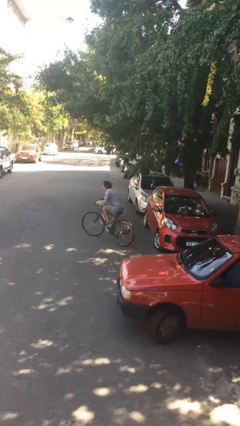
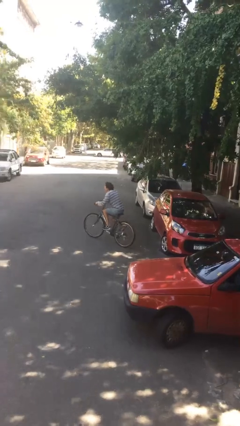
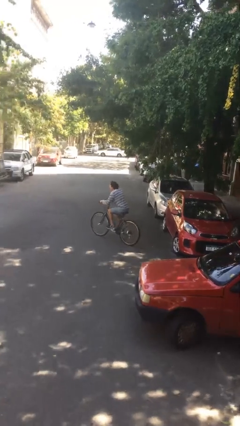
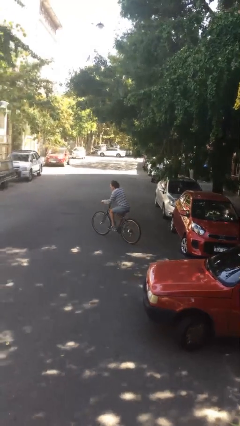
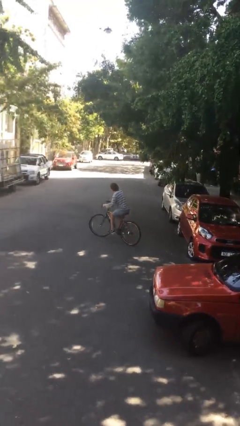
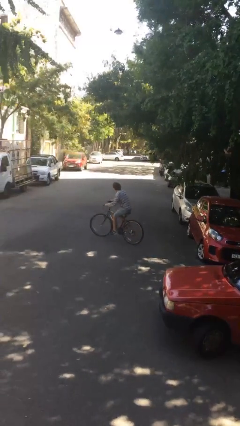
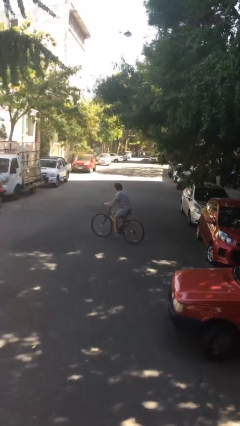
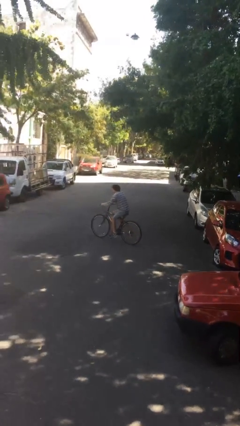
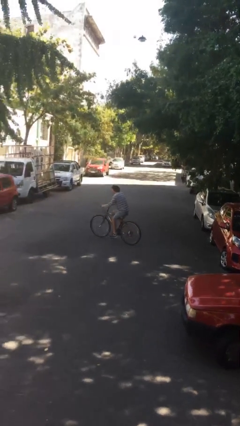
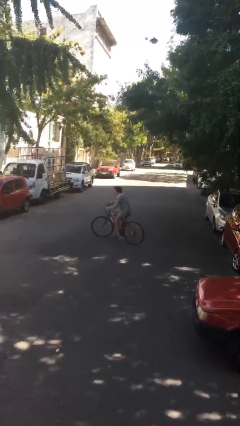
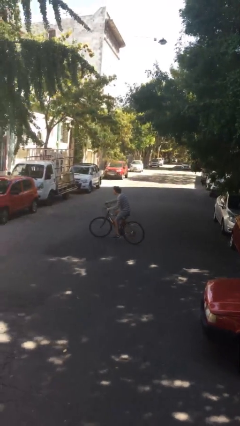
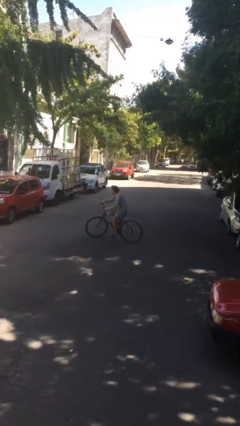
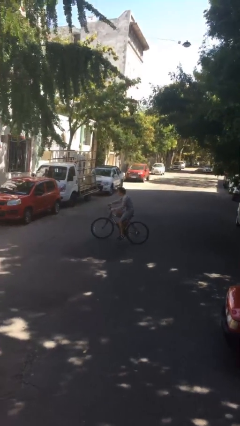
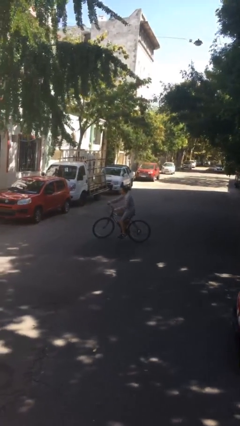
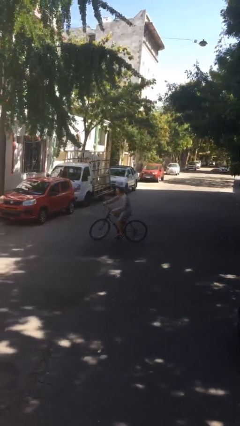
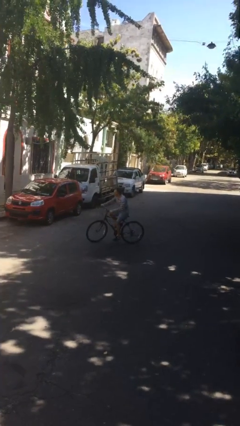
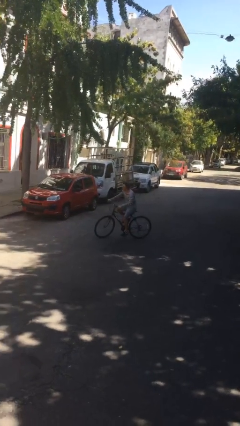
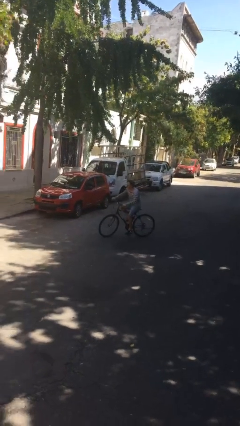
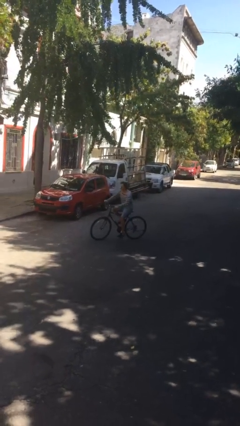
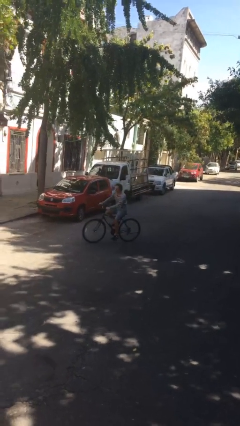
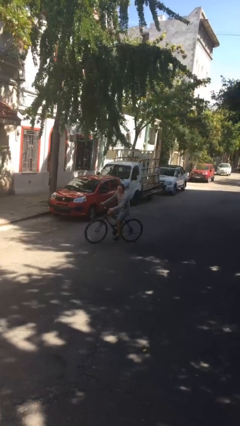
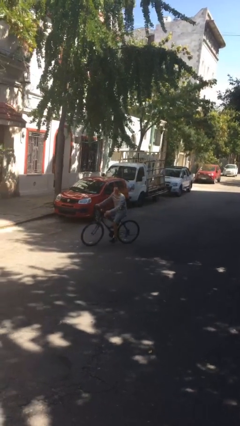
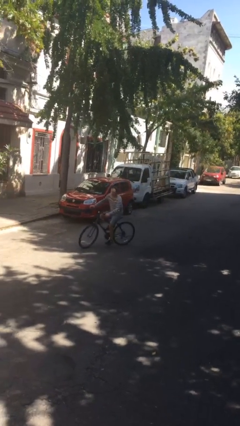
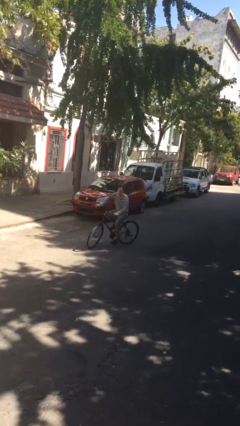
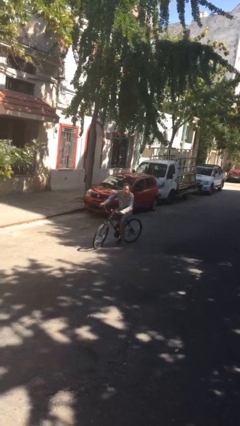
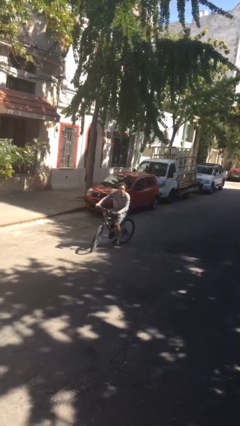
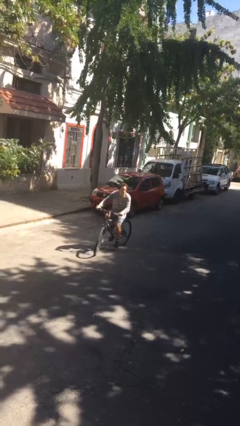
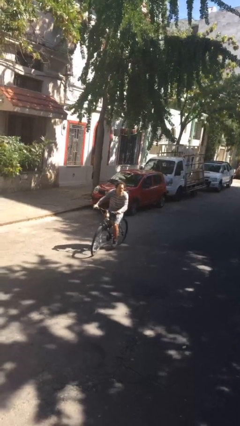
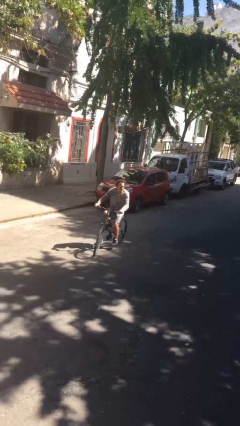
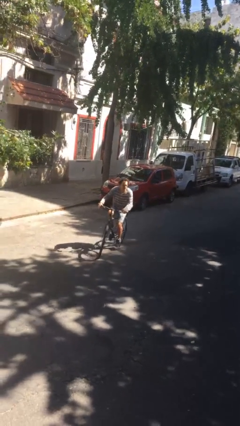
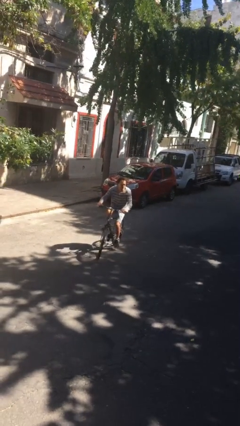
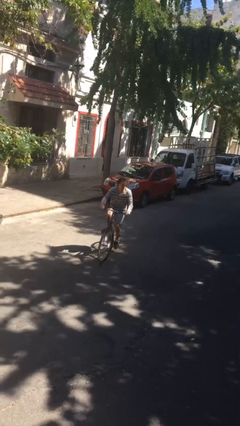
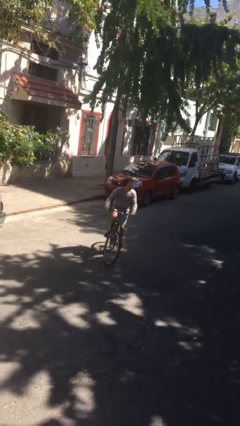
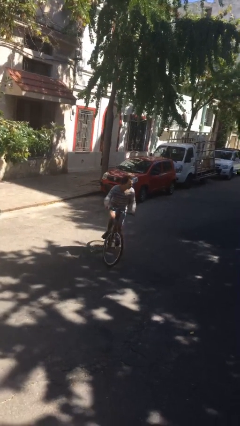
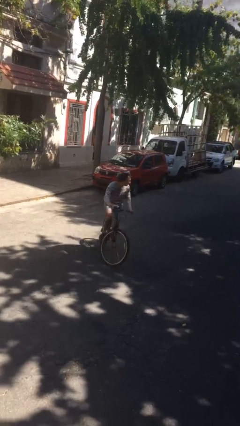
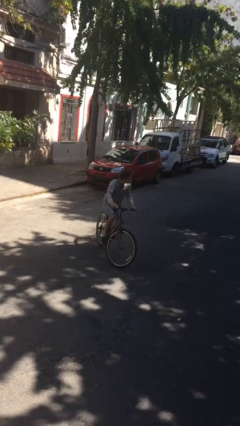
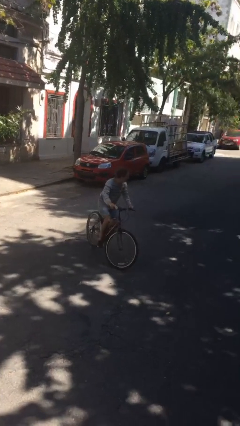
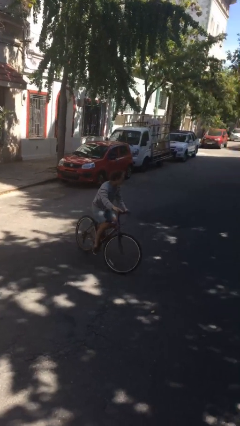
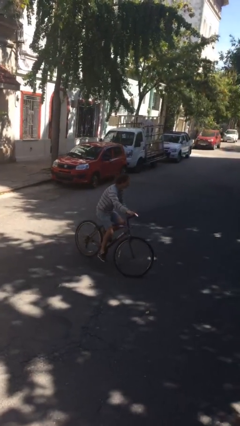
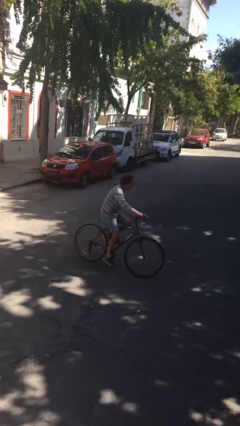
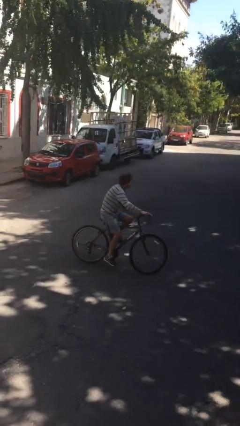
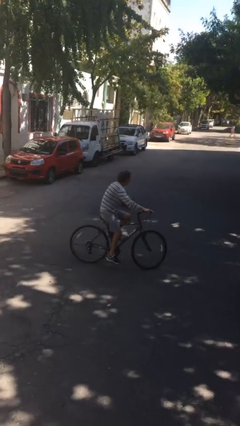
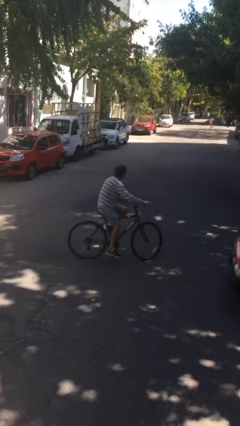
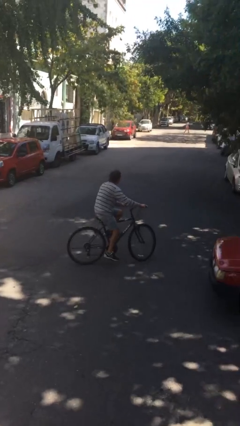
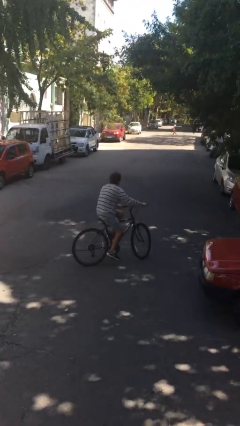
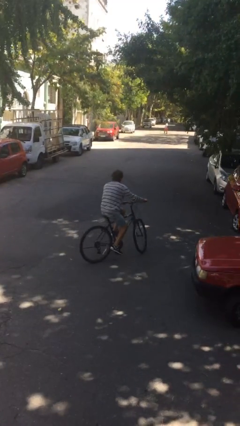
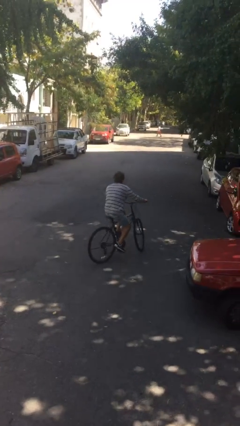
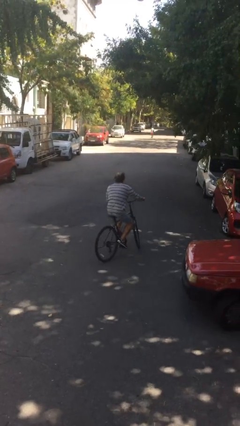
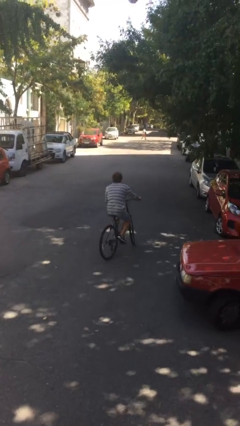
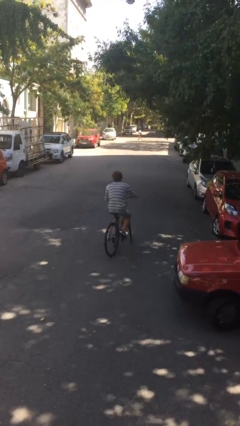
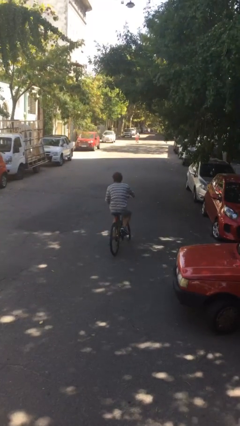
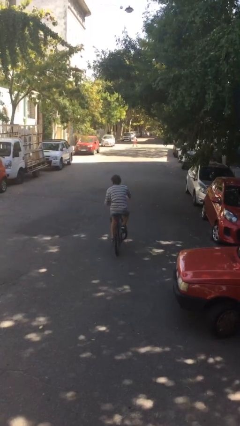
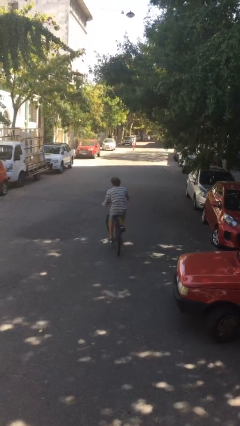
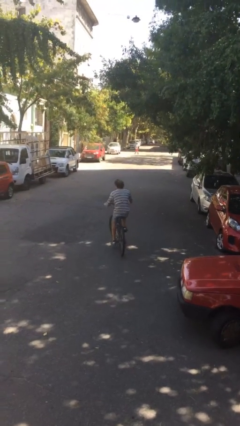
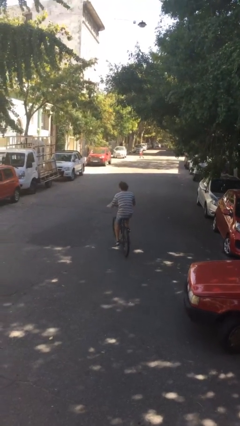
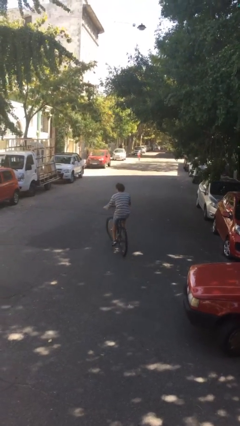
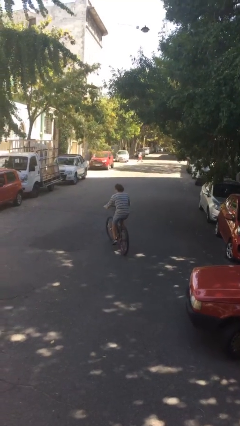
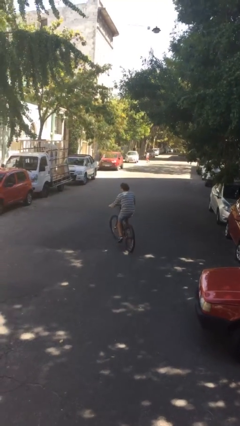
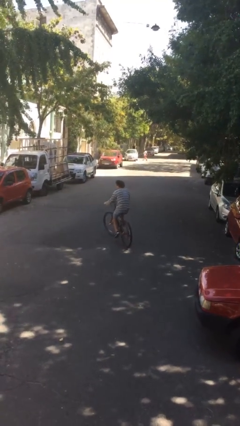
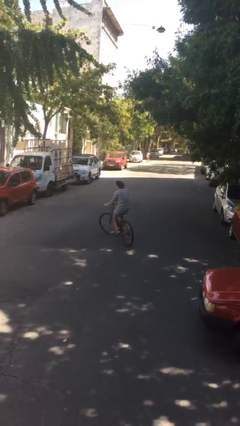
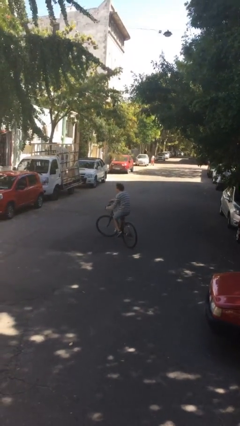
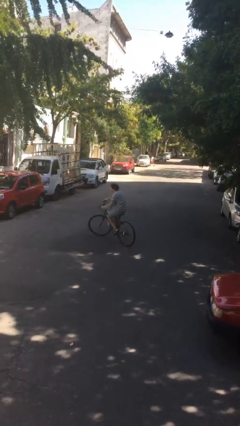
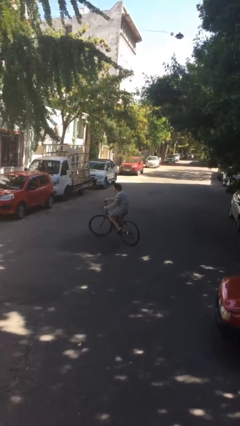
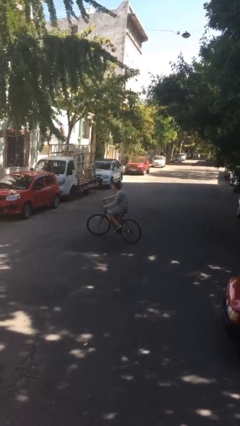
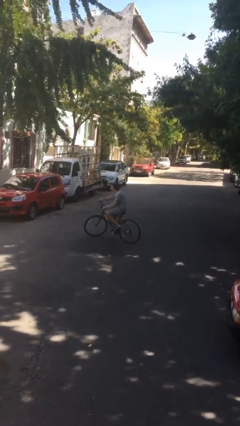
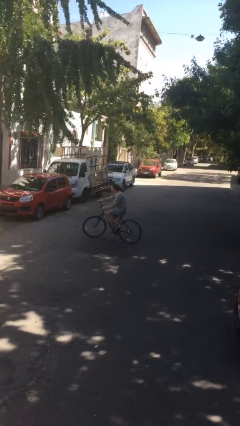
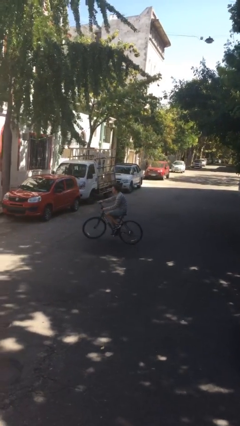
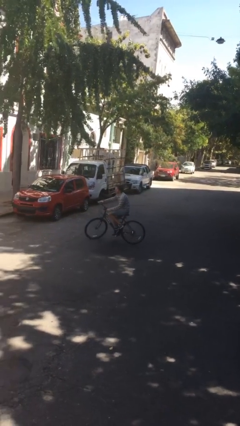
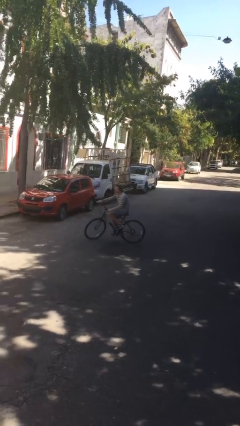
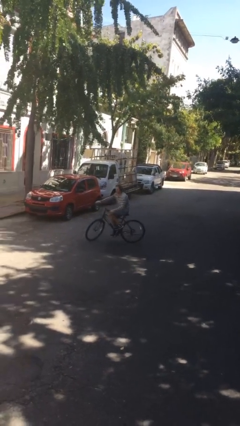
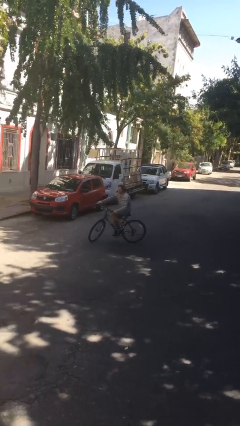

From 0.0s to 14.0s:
person rides bicycle

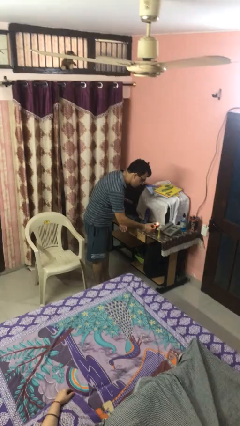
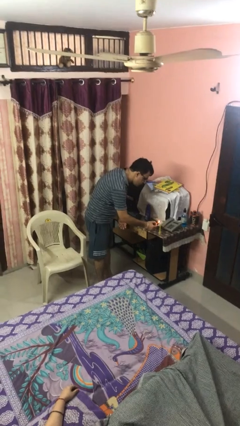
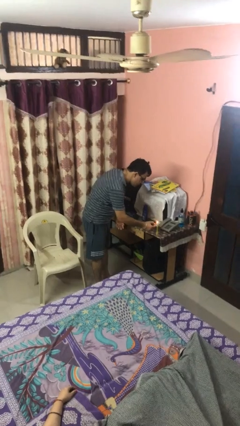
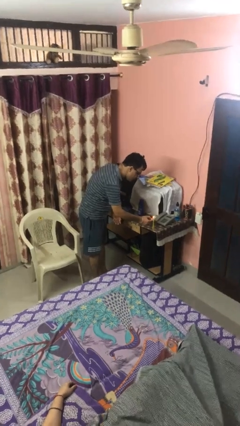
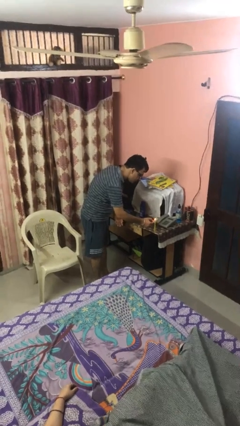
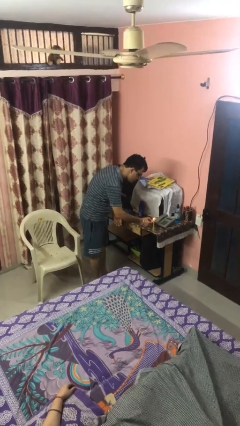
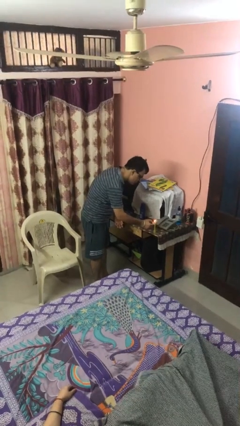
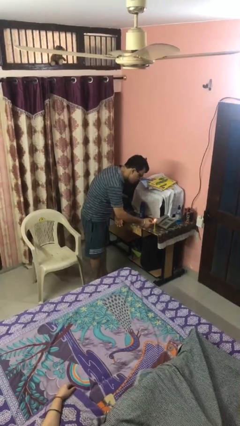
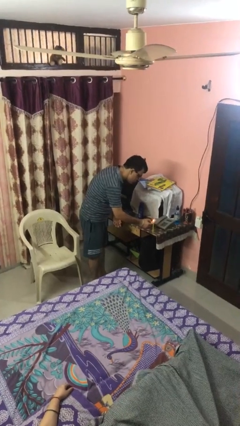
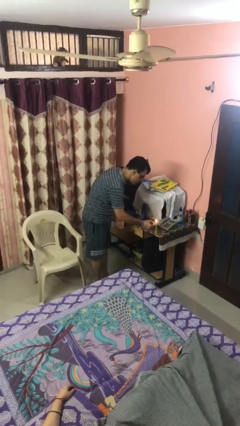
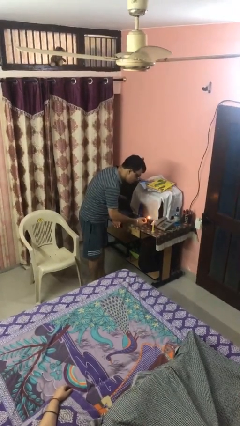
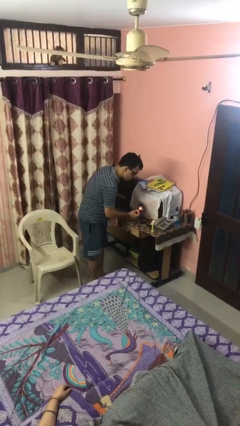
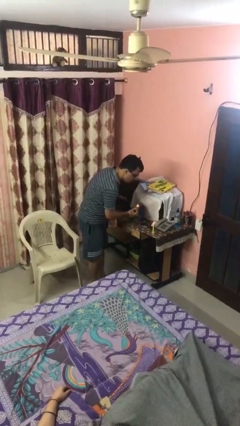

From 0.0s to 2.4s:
person lights candle

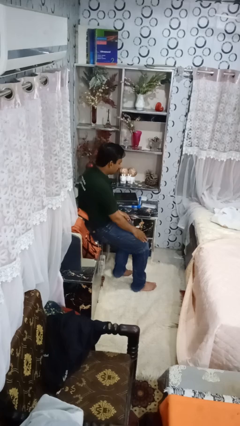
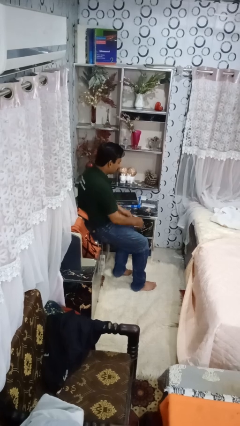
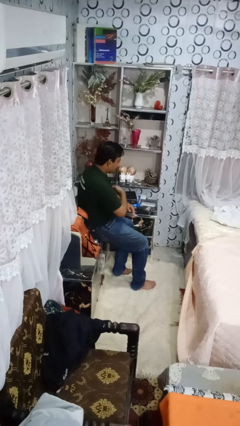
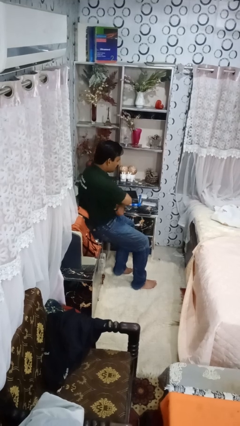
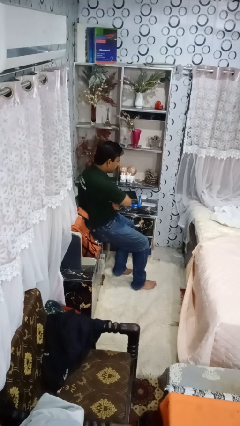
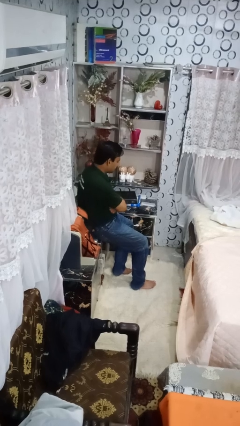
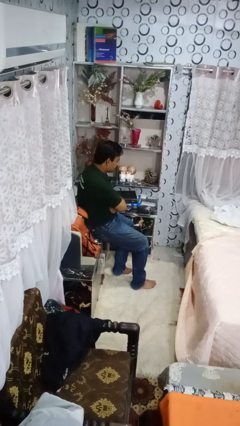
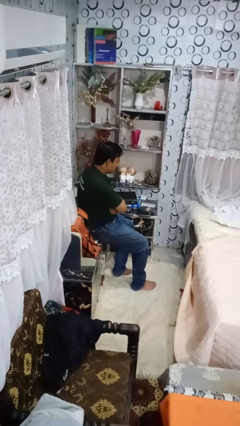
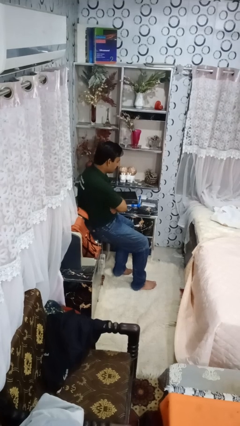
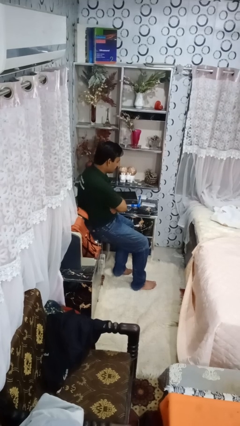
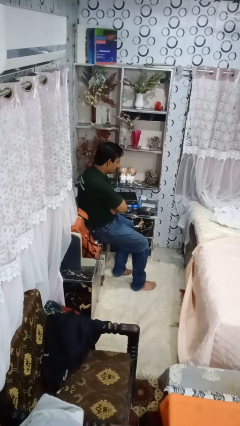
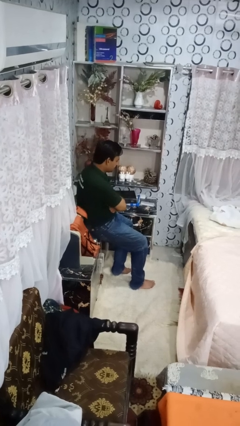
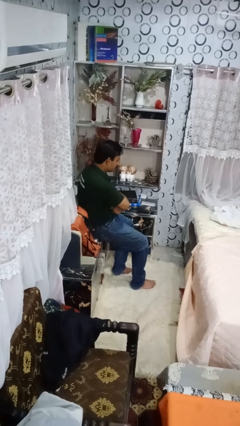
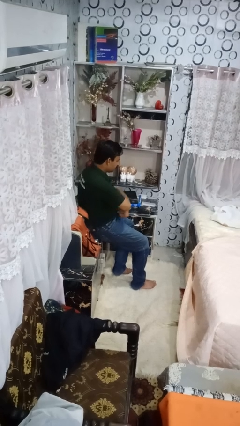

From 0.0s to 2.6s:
person crosses arms
